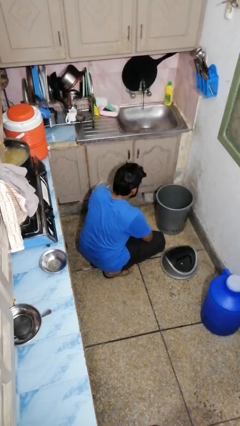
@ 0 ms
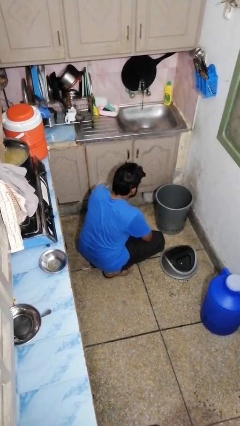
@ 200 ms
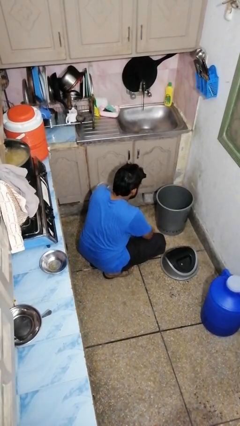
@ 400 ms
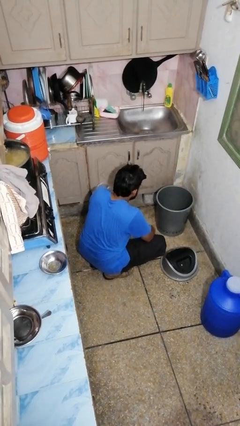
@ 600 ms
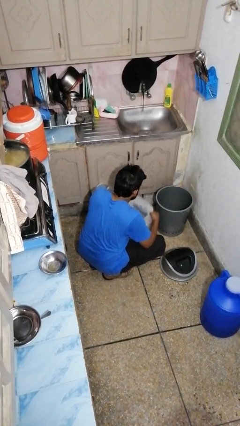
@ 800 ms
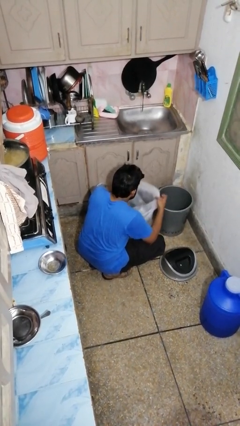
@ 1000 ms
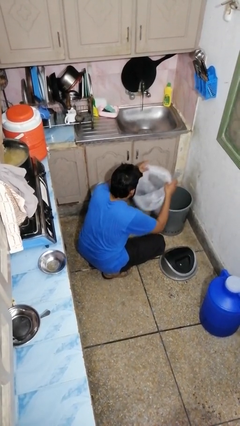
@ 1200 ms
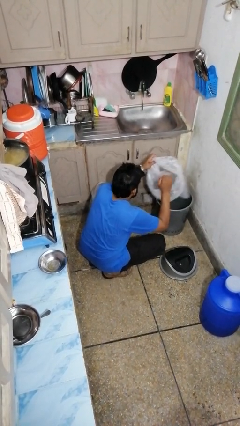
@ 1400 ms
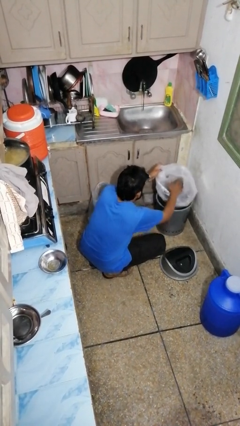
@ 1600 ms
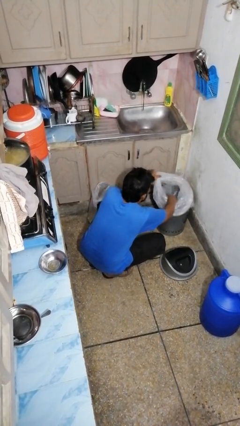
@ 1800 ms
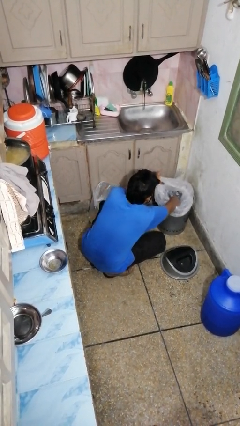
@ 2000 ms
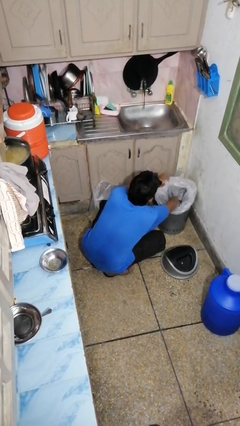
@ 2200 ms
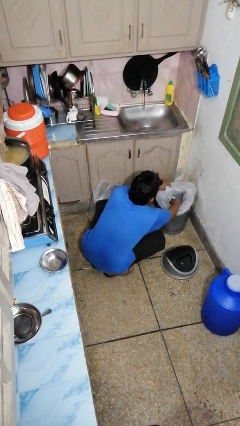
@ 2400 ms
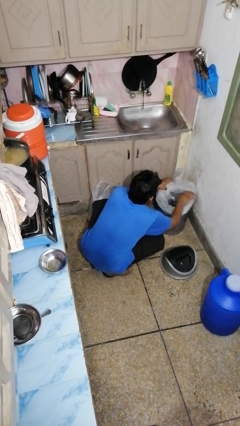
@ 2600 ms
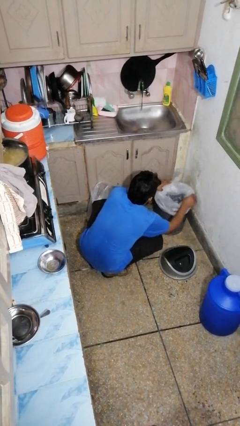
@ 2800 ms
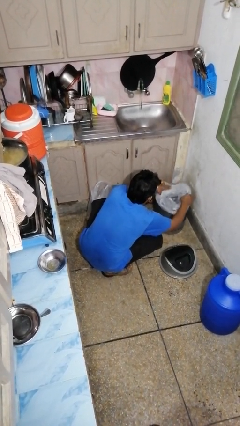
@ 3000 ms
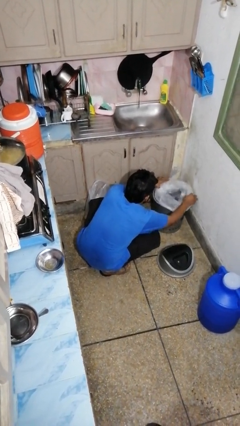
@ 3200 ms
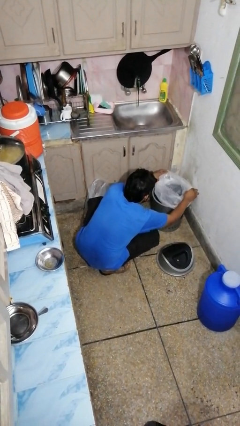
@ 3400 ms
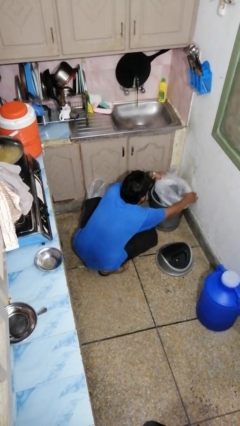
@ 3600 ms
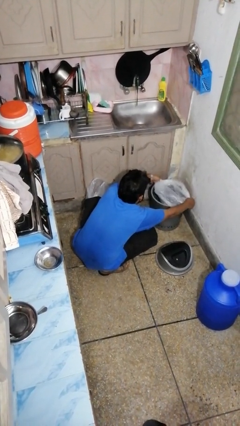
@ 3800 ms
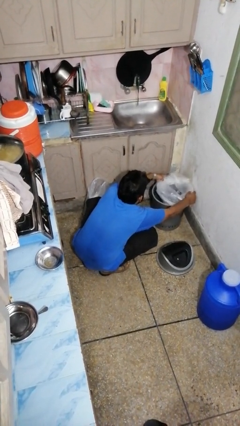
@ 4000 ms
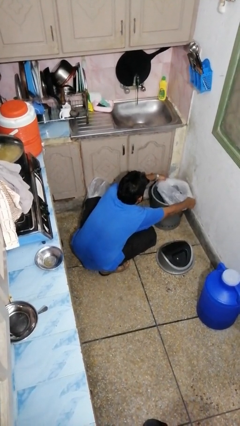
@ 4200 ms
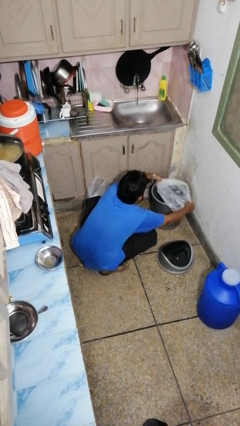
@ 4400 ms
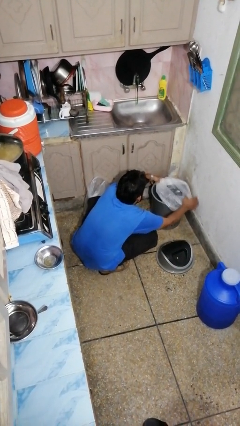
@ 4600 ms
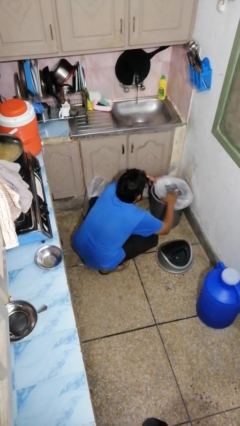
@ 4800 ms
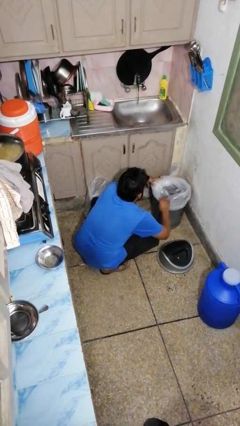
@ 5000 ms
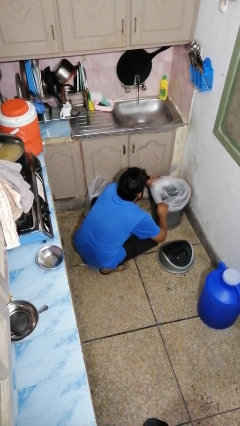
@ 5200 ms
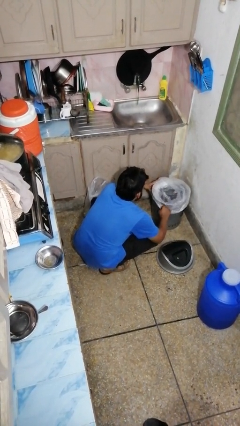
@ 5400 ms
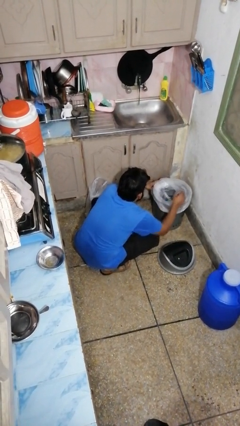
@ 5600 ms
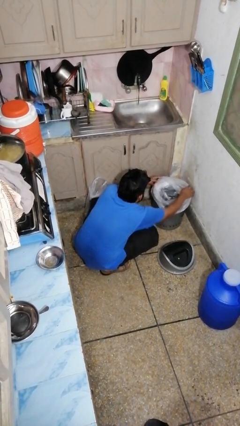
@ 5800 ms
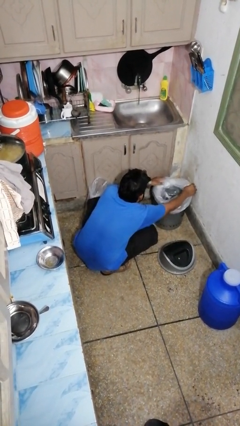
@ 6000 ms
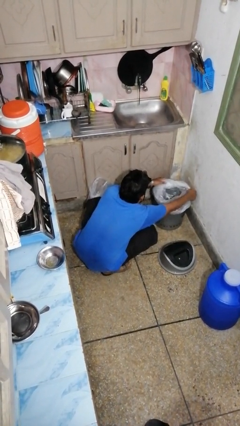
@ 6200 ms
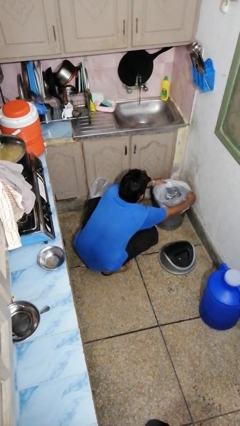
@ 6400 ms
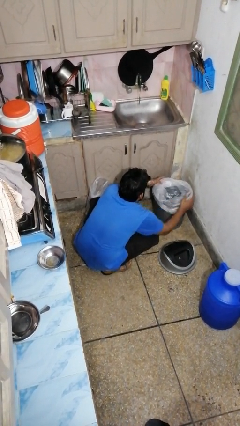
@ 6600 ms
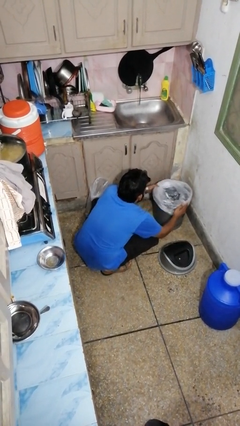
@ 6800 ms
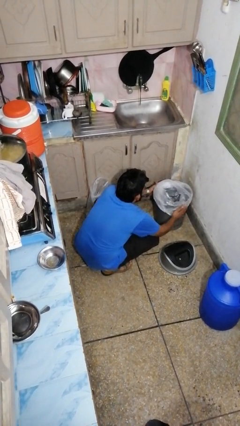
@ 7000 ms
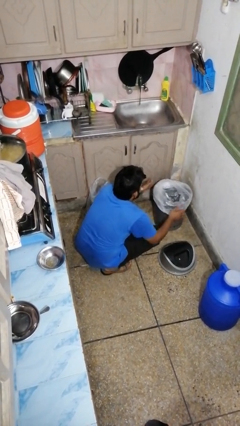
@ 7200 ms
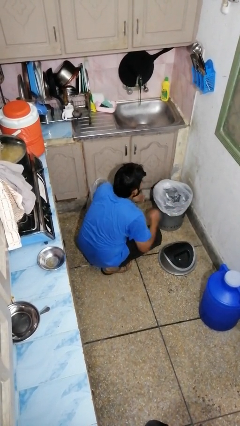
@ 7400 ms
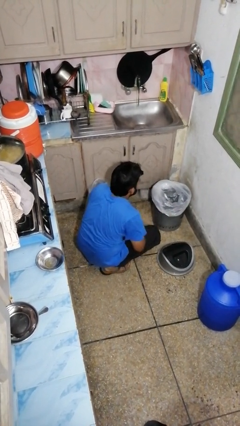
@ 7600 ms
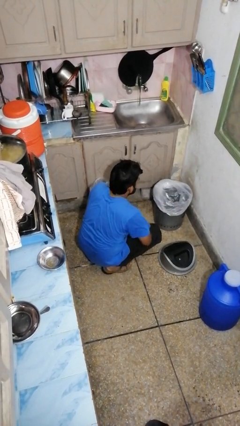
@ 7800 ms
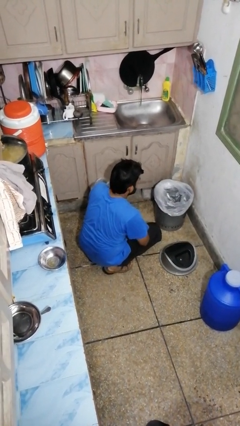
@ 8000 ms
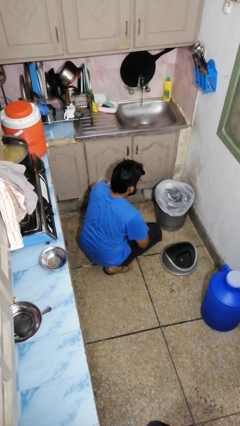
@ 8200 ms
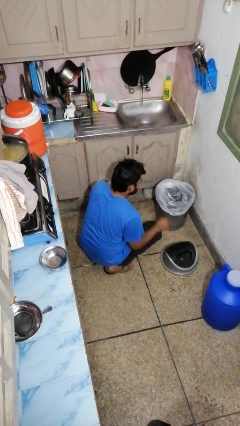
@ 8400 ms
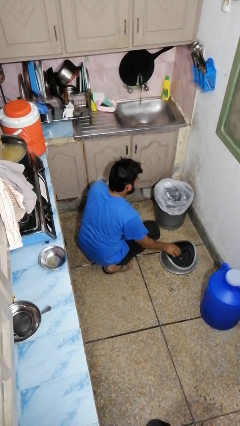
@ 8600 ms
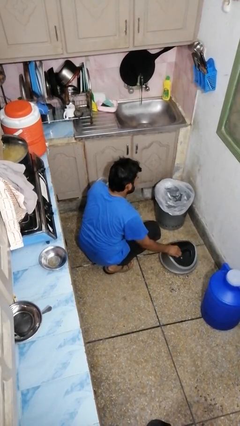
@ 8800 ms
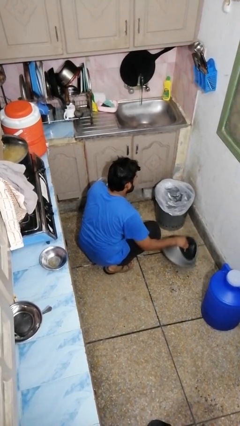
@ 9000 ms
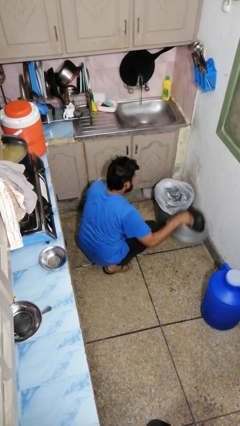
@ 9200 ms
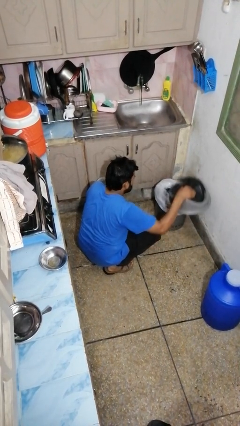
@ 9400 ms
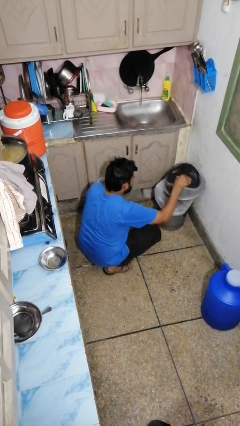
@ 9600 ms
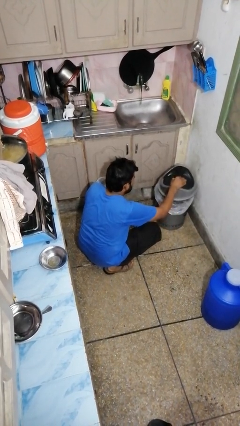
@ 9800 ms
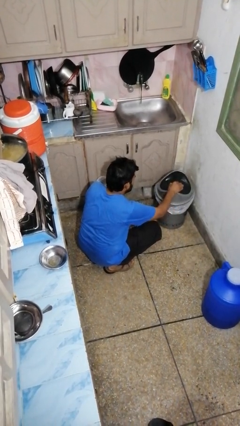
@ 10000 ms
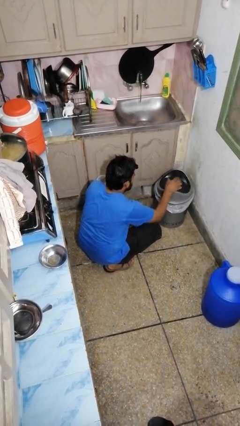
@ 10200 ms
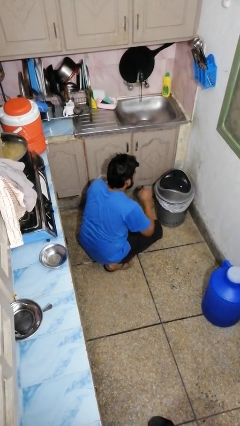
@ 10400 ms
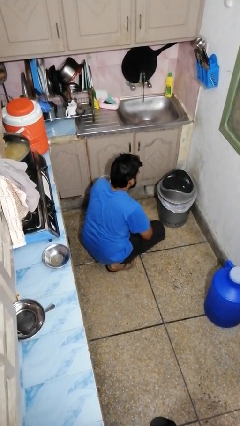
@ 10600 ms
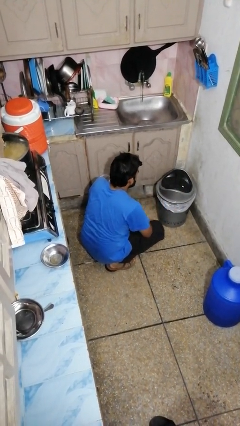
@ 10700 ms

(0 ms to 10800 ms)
person inserts trashbag into trashcan

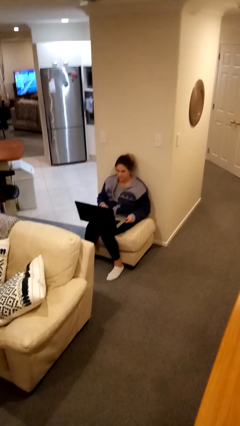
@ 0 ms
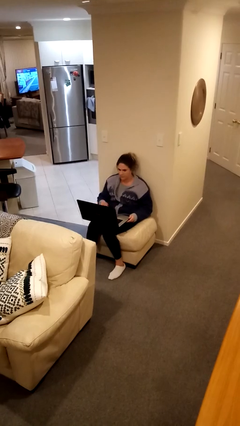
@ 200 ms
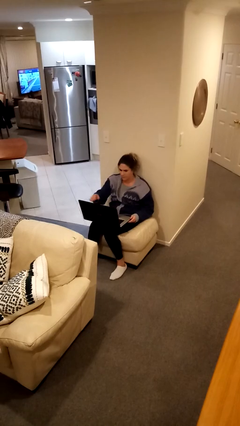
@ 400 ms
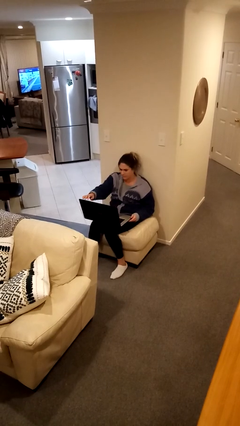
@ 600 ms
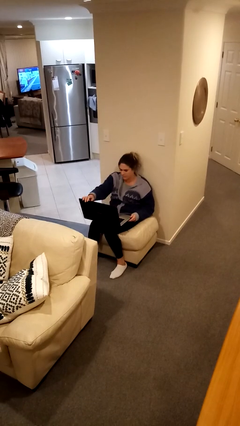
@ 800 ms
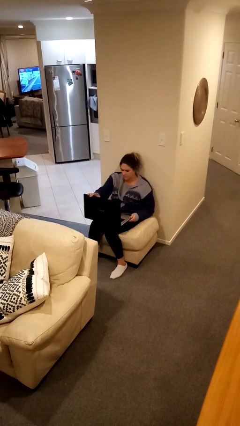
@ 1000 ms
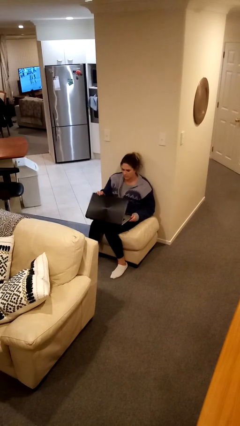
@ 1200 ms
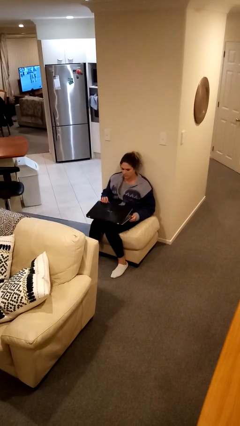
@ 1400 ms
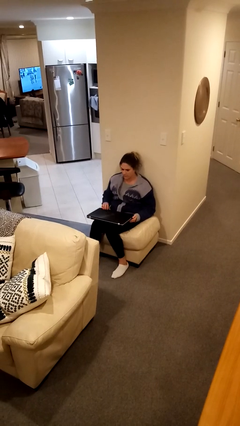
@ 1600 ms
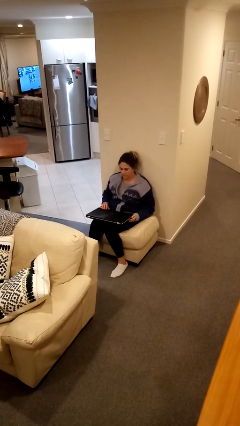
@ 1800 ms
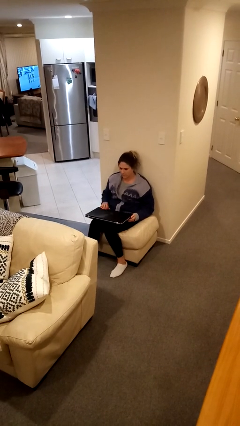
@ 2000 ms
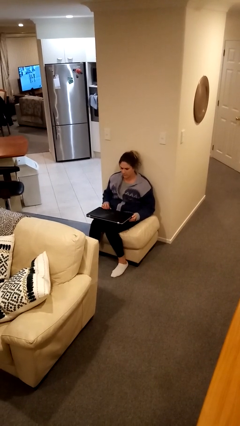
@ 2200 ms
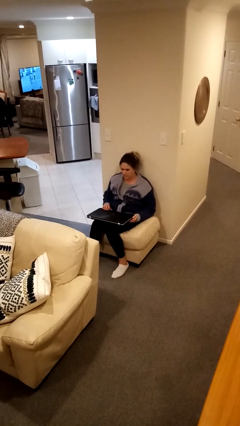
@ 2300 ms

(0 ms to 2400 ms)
person closes laptop

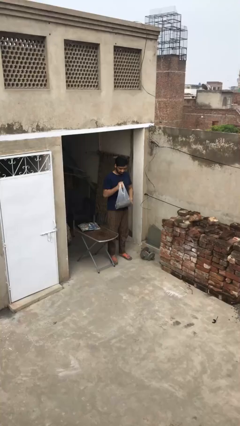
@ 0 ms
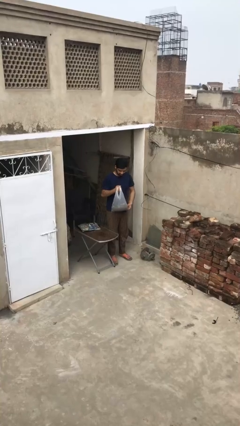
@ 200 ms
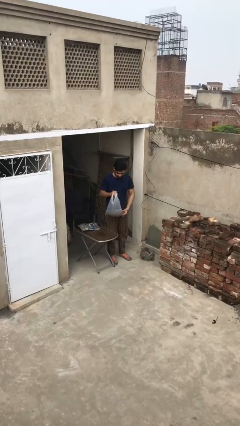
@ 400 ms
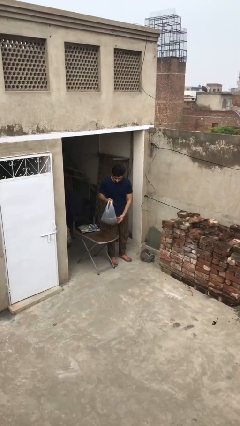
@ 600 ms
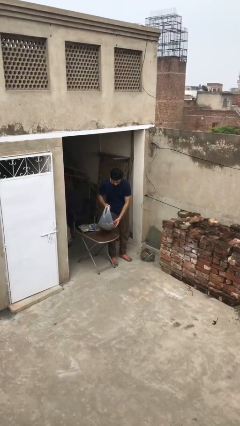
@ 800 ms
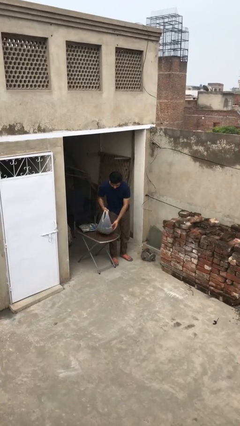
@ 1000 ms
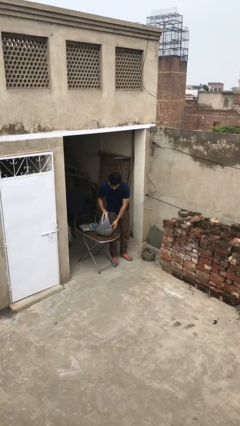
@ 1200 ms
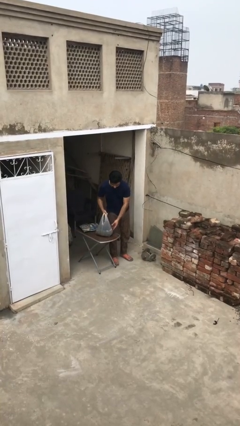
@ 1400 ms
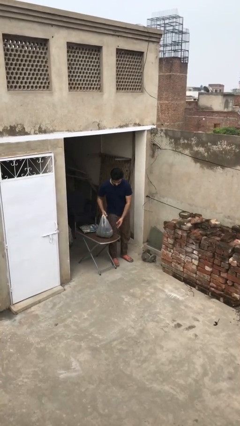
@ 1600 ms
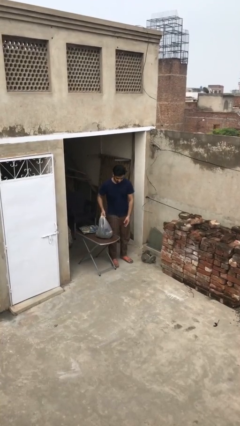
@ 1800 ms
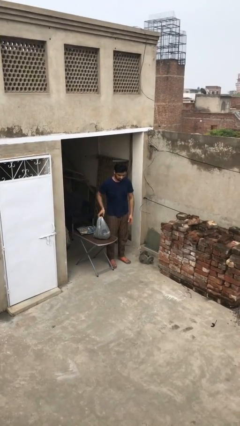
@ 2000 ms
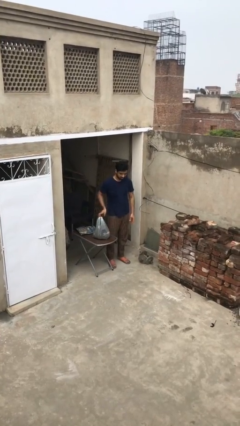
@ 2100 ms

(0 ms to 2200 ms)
person puts down object on table

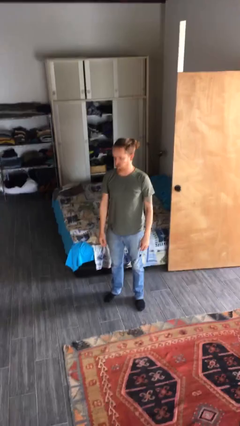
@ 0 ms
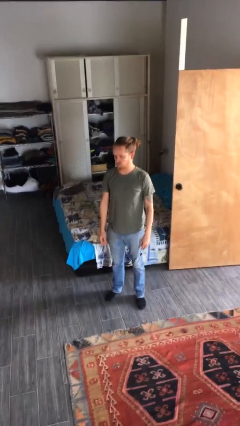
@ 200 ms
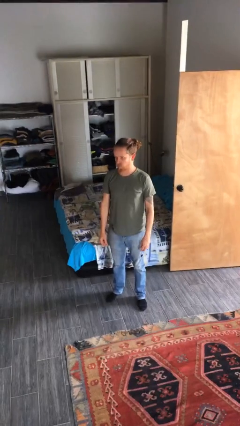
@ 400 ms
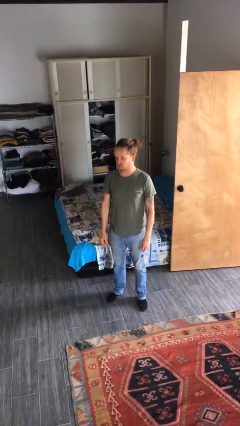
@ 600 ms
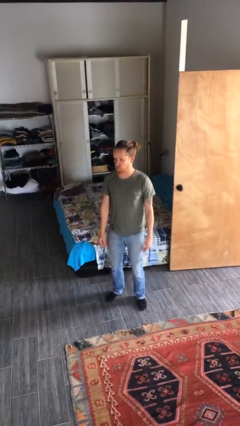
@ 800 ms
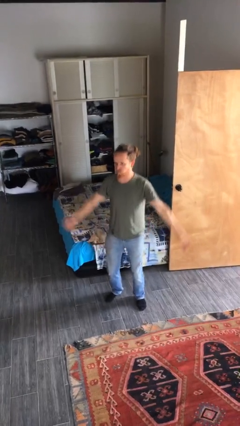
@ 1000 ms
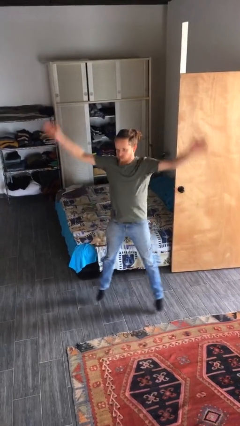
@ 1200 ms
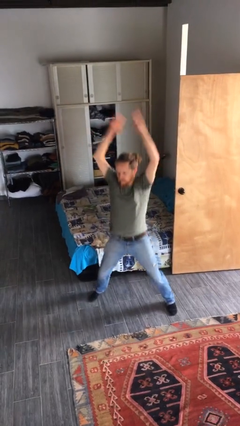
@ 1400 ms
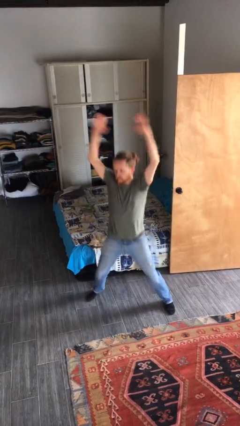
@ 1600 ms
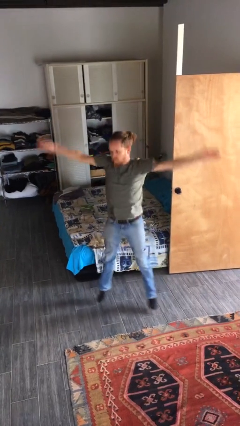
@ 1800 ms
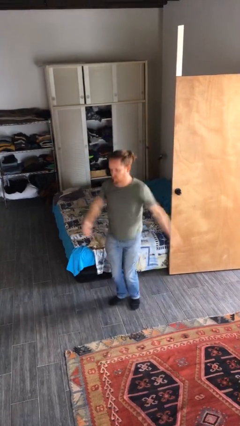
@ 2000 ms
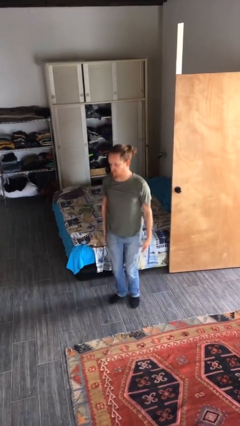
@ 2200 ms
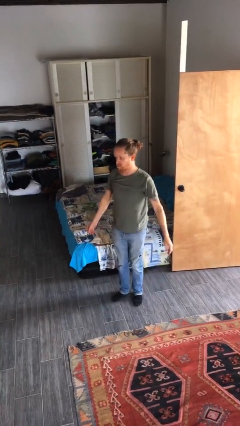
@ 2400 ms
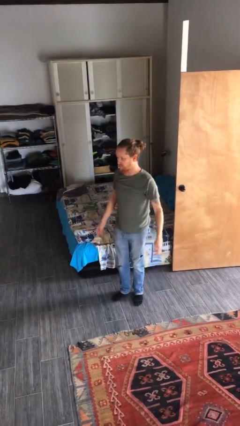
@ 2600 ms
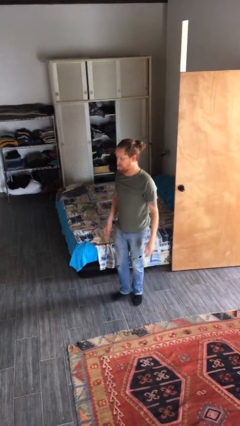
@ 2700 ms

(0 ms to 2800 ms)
person exercises with jumping jacks
